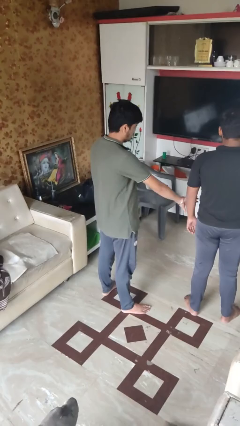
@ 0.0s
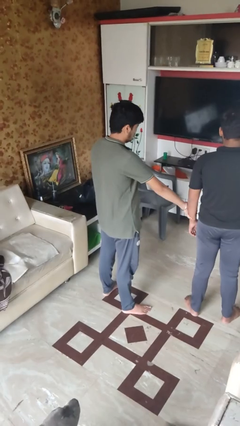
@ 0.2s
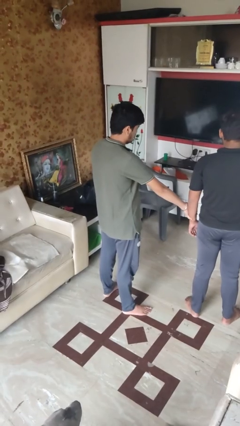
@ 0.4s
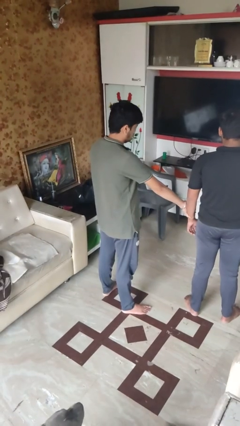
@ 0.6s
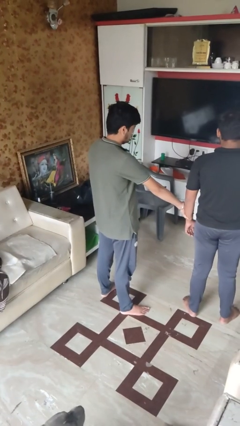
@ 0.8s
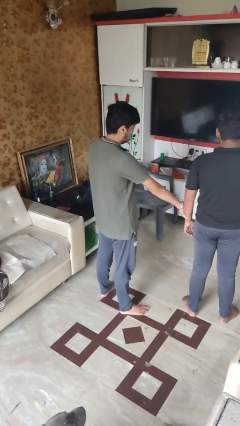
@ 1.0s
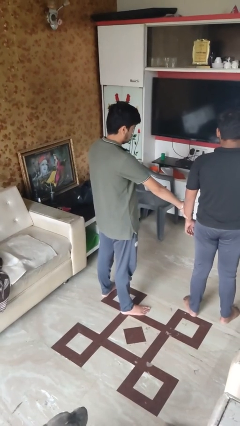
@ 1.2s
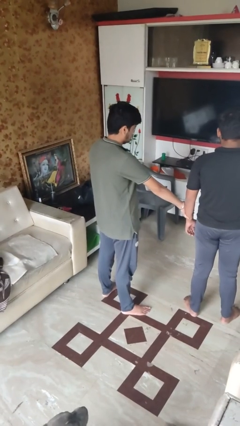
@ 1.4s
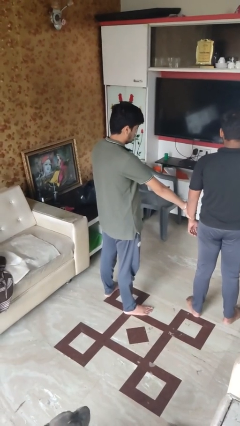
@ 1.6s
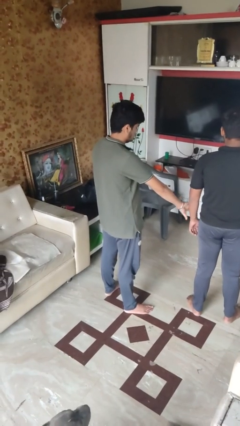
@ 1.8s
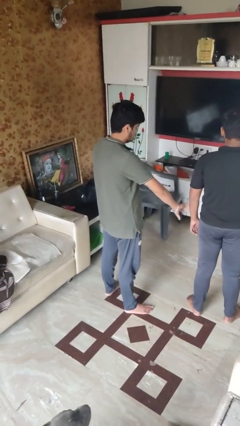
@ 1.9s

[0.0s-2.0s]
person grabs person by forearm

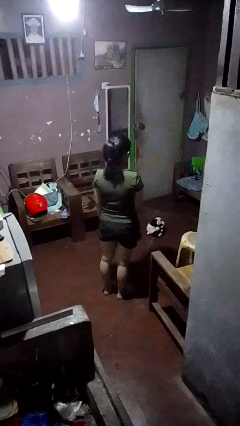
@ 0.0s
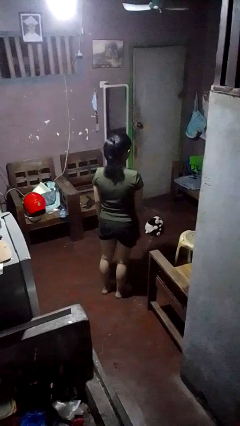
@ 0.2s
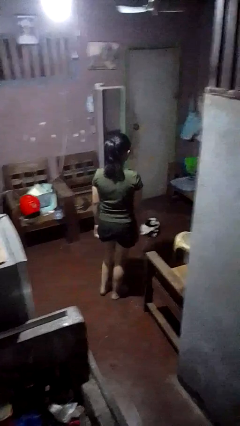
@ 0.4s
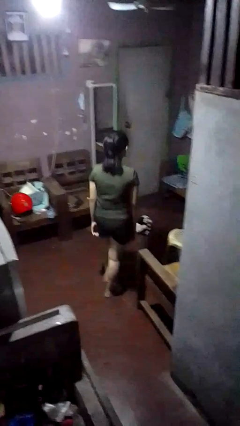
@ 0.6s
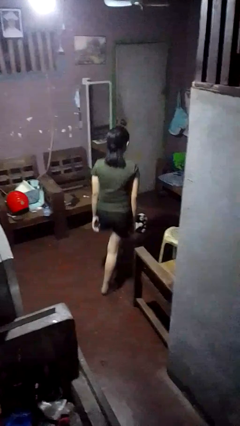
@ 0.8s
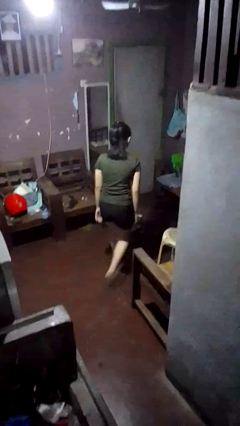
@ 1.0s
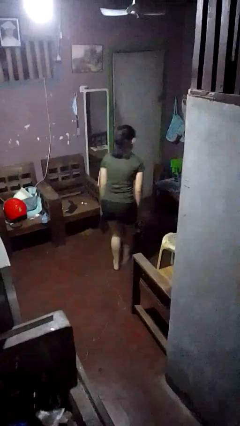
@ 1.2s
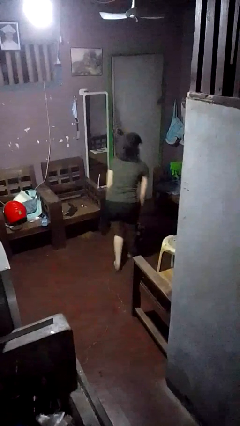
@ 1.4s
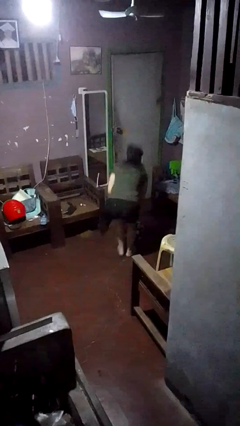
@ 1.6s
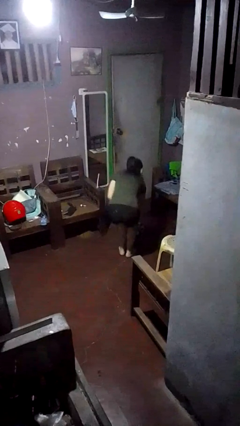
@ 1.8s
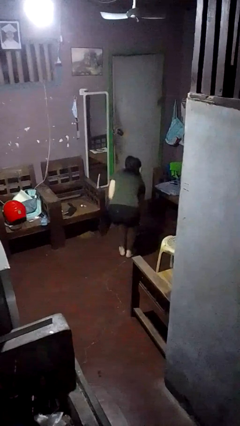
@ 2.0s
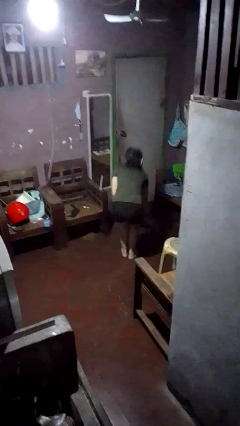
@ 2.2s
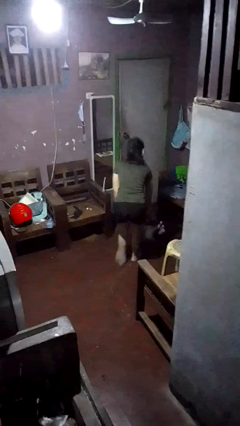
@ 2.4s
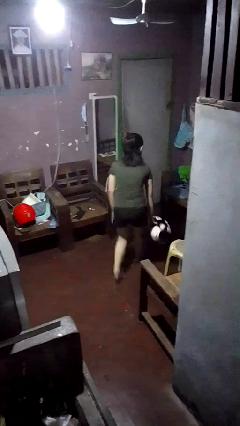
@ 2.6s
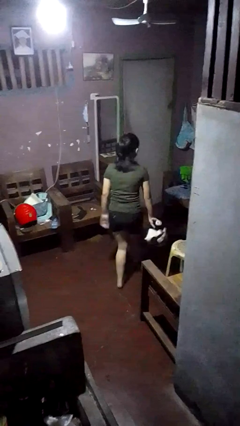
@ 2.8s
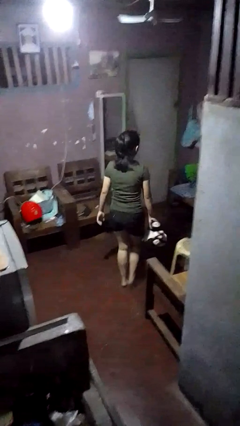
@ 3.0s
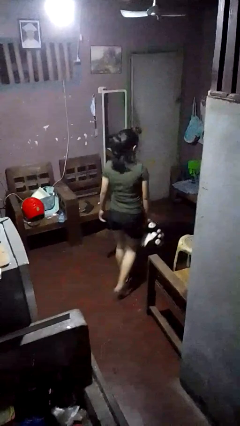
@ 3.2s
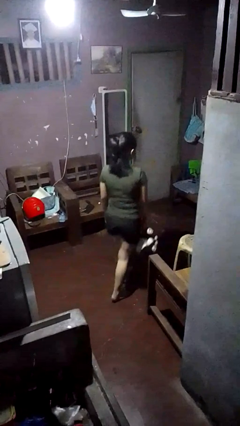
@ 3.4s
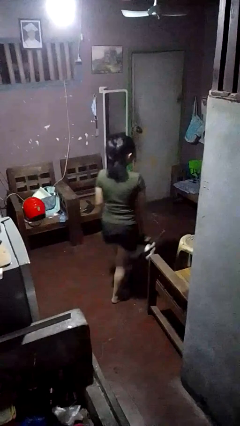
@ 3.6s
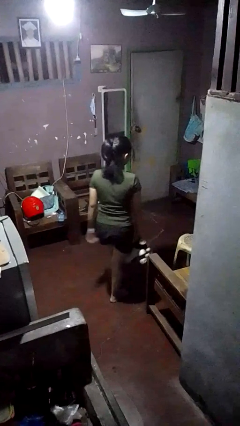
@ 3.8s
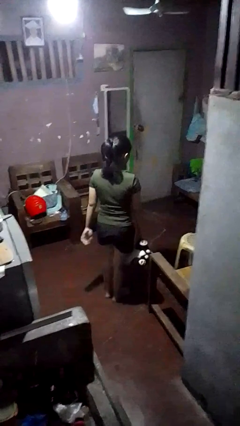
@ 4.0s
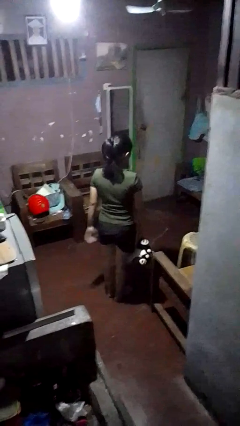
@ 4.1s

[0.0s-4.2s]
person picks up object from floor

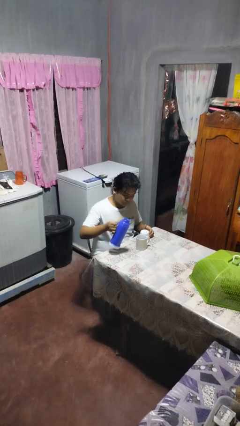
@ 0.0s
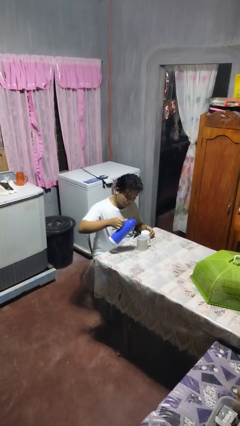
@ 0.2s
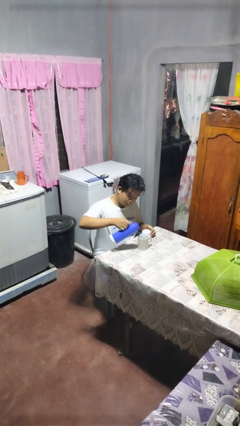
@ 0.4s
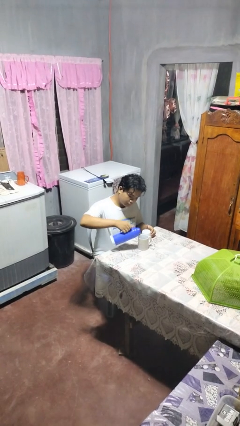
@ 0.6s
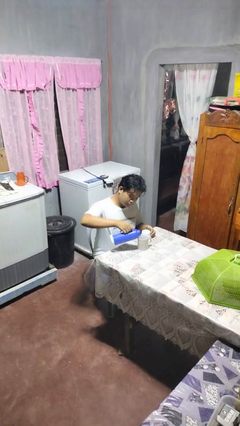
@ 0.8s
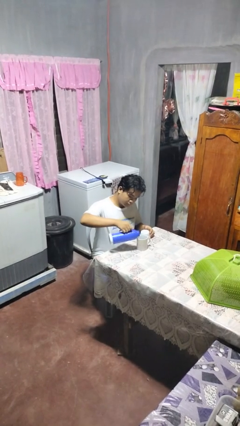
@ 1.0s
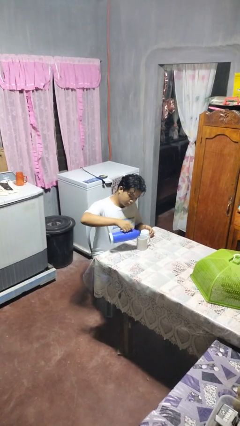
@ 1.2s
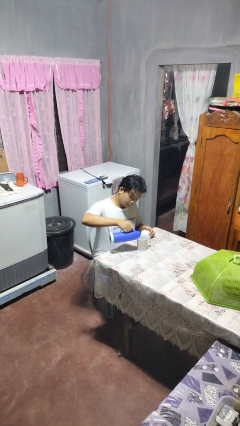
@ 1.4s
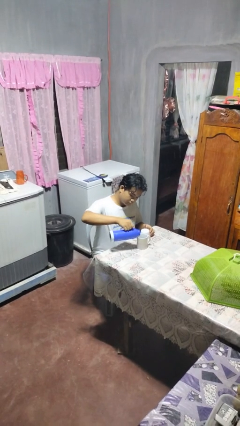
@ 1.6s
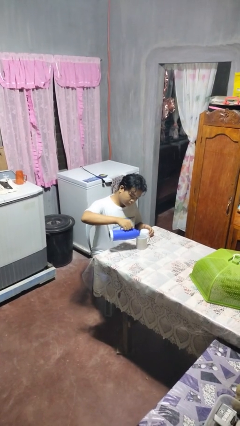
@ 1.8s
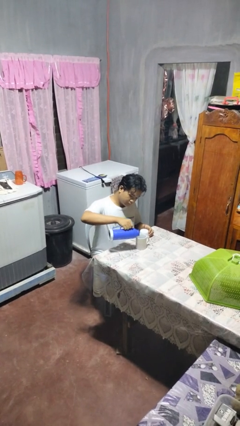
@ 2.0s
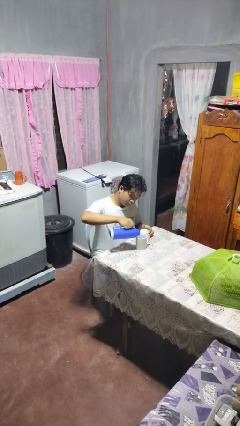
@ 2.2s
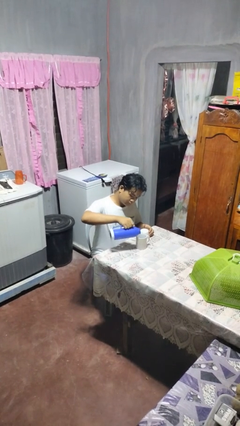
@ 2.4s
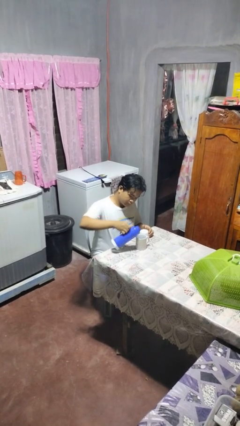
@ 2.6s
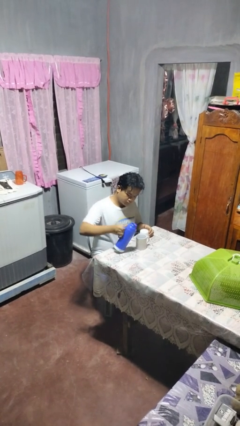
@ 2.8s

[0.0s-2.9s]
person pours coffee into mug

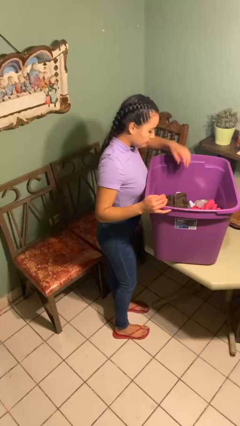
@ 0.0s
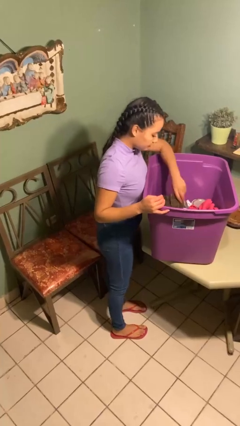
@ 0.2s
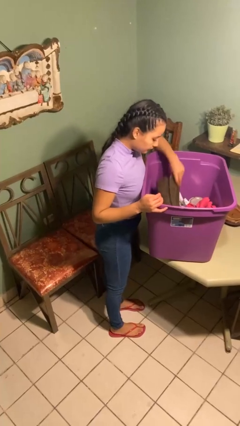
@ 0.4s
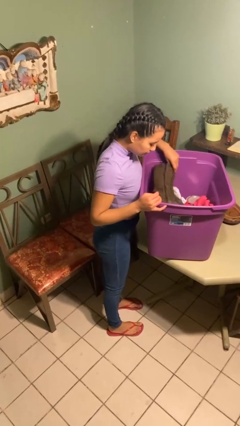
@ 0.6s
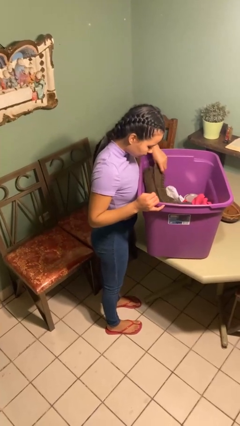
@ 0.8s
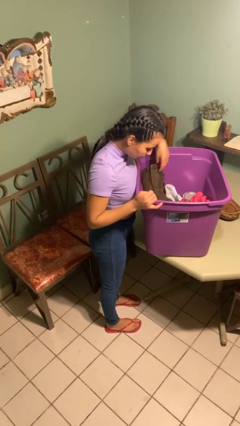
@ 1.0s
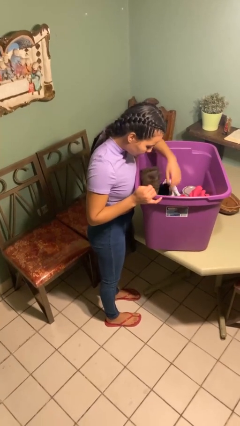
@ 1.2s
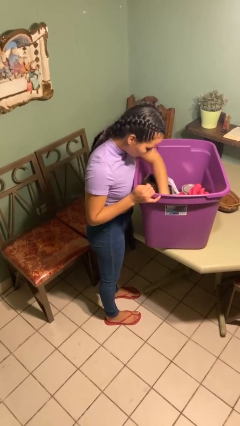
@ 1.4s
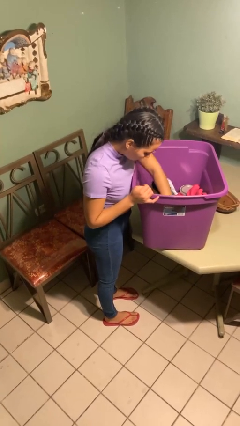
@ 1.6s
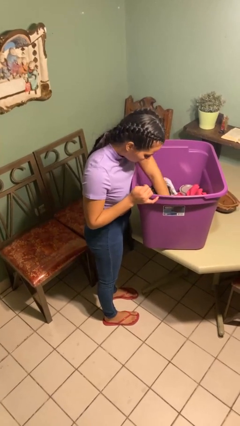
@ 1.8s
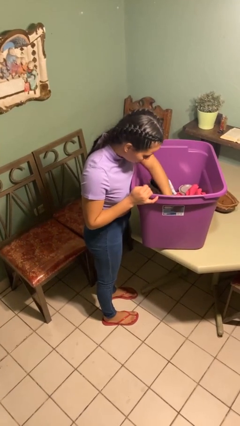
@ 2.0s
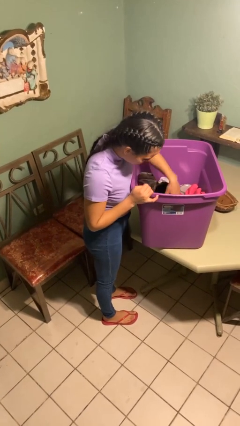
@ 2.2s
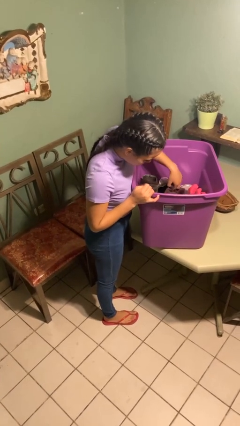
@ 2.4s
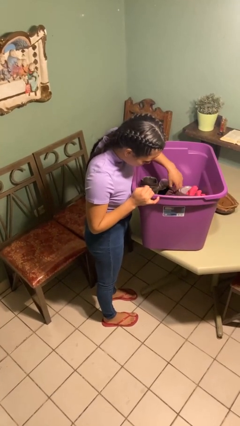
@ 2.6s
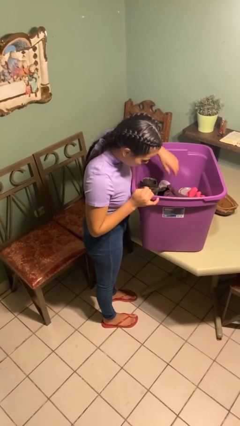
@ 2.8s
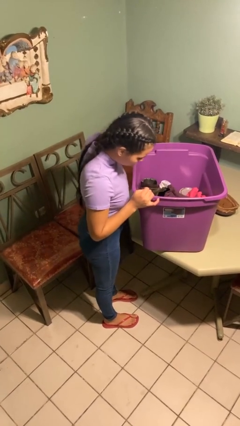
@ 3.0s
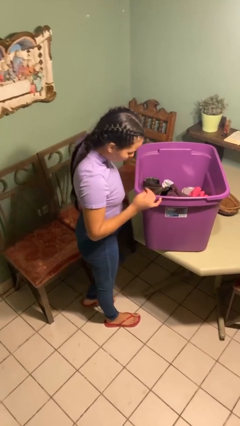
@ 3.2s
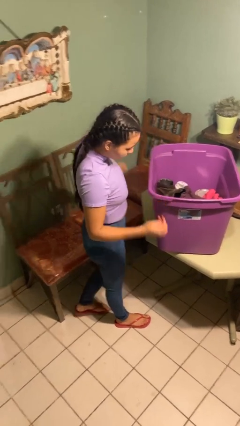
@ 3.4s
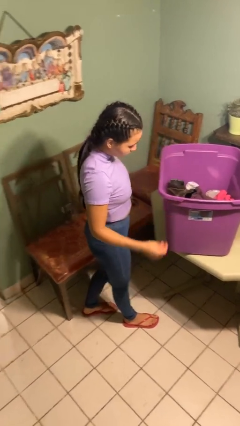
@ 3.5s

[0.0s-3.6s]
person searches in box

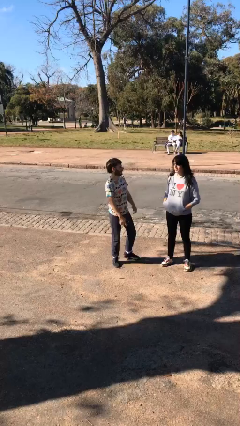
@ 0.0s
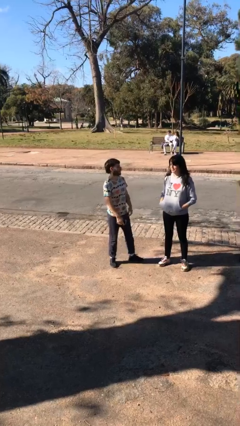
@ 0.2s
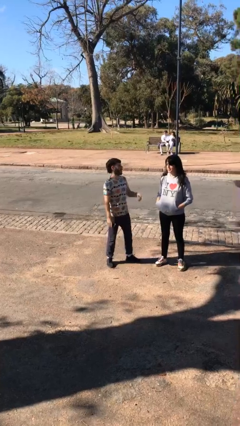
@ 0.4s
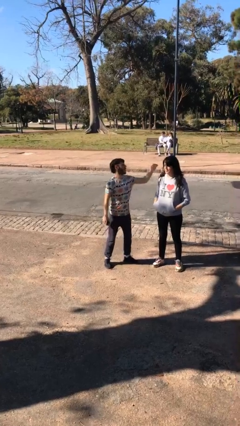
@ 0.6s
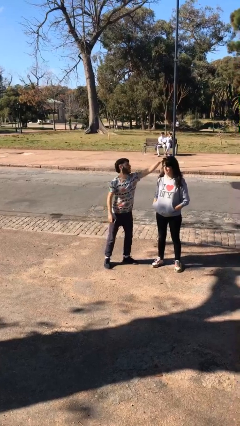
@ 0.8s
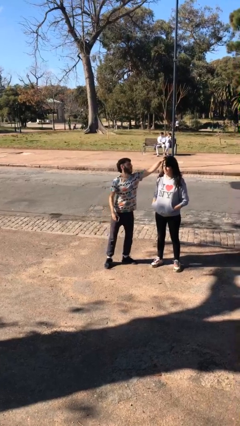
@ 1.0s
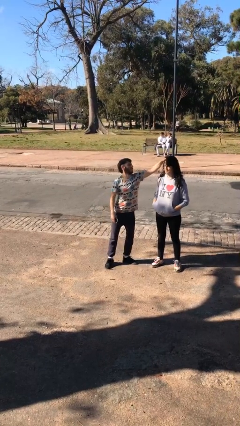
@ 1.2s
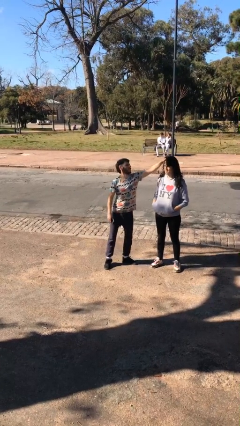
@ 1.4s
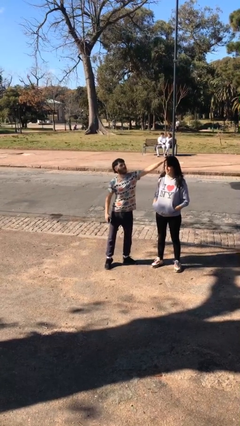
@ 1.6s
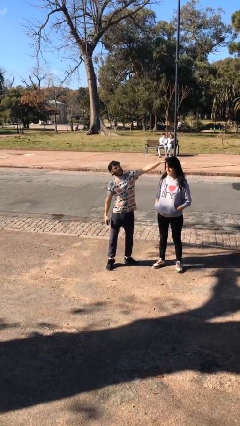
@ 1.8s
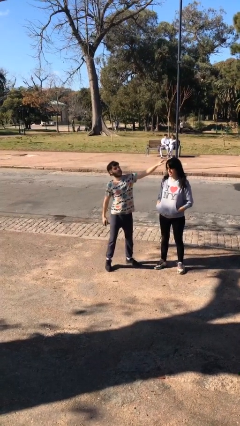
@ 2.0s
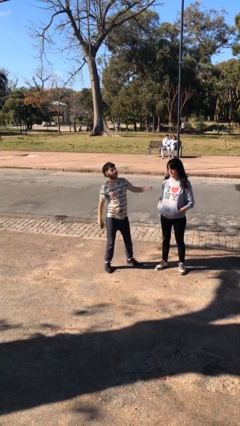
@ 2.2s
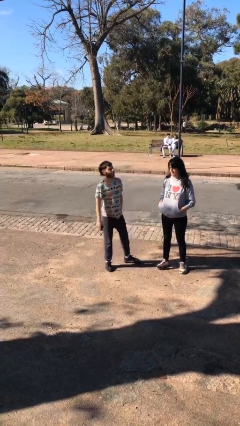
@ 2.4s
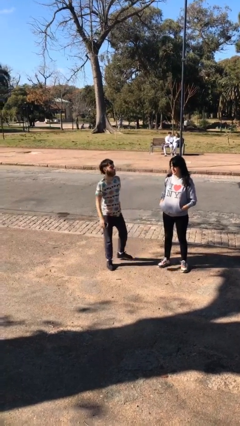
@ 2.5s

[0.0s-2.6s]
person grabs person by hair

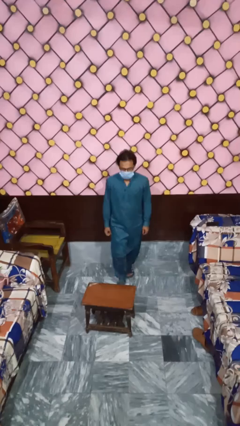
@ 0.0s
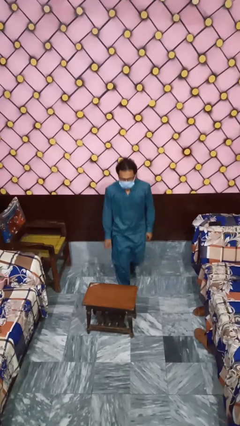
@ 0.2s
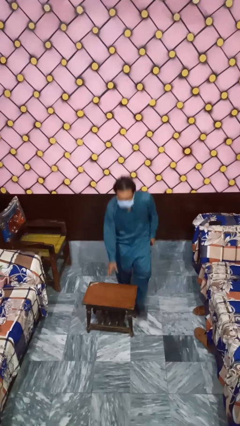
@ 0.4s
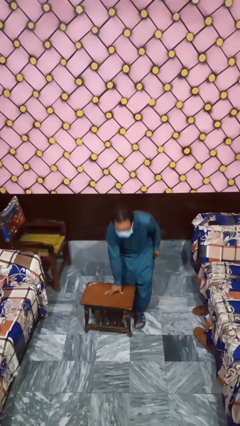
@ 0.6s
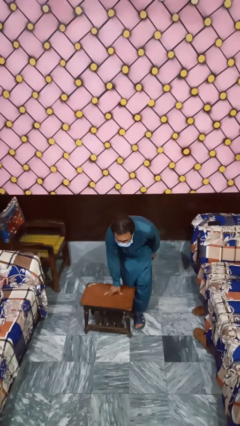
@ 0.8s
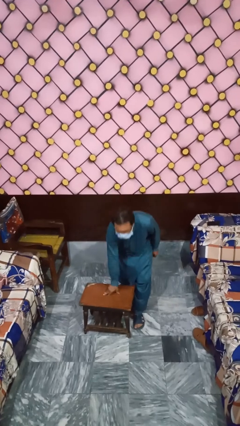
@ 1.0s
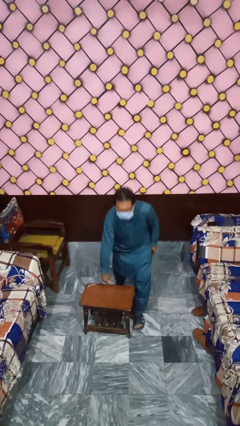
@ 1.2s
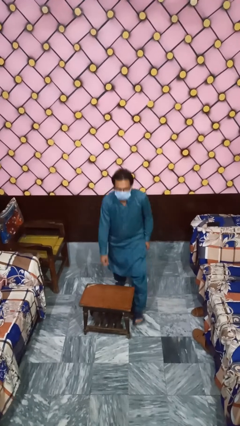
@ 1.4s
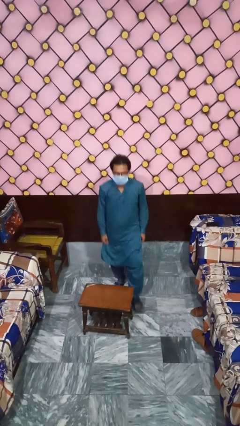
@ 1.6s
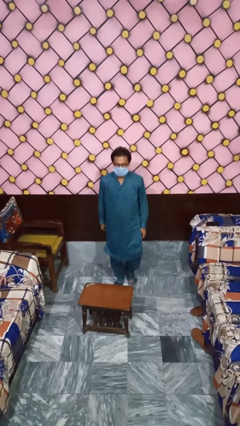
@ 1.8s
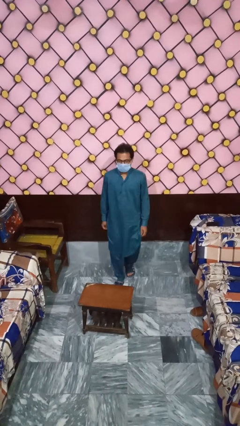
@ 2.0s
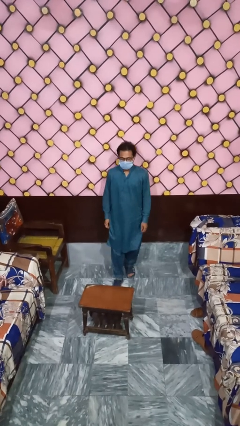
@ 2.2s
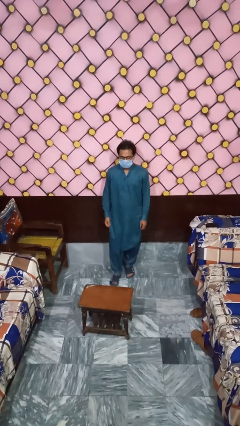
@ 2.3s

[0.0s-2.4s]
person bumps into table

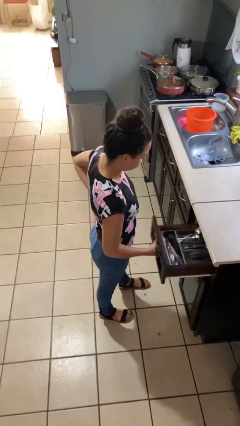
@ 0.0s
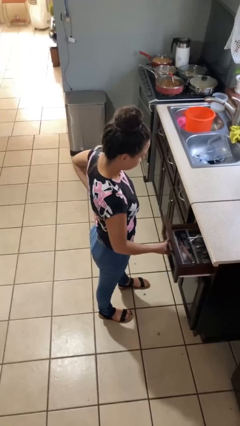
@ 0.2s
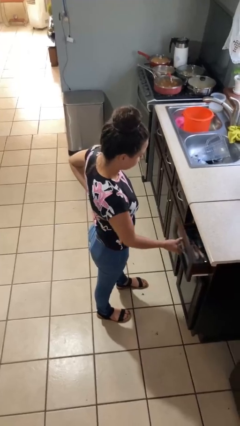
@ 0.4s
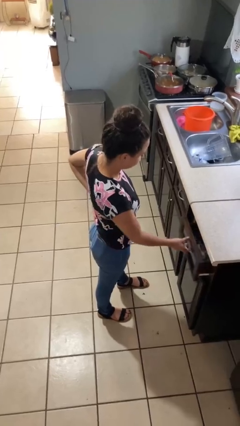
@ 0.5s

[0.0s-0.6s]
person closes kitchen drawer
